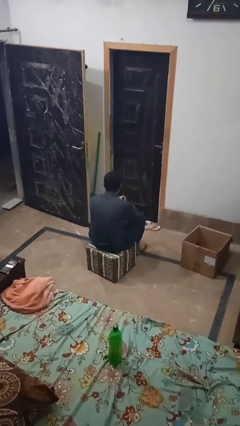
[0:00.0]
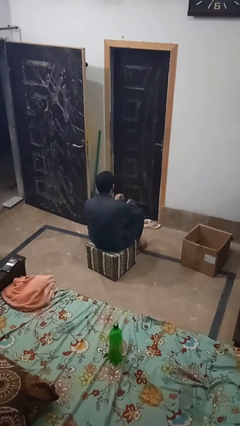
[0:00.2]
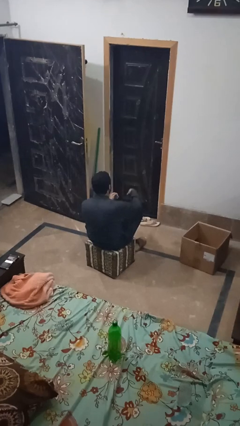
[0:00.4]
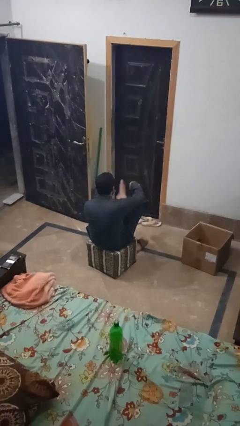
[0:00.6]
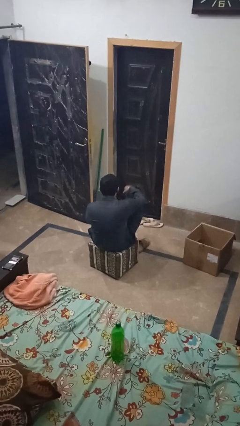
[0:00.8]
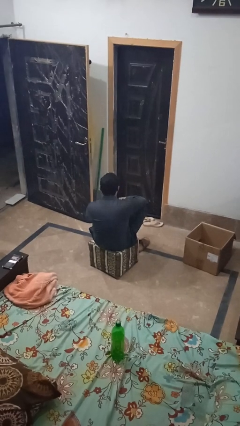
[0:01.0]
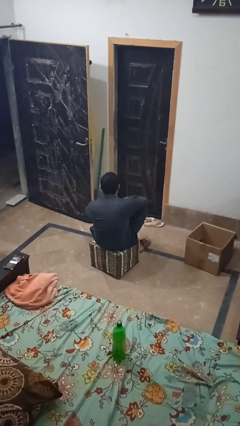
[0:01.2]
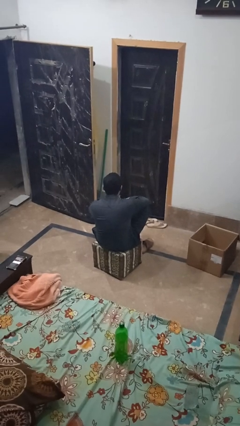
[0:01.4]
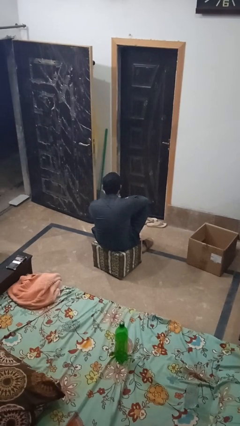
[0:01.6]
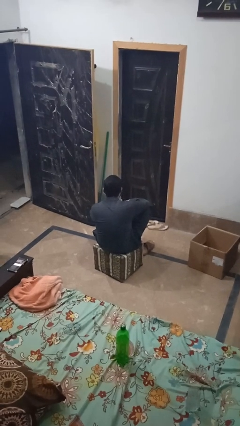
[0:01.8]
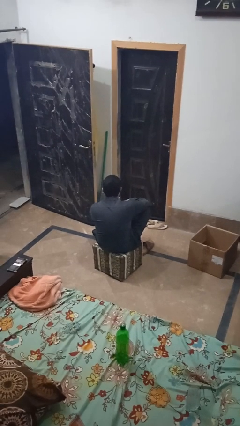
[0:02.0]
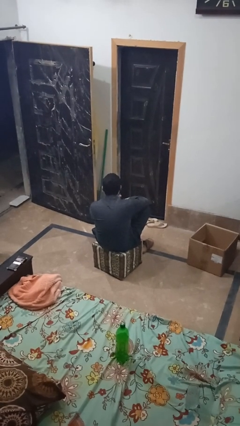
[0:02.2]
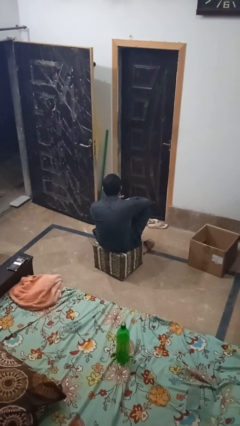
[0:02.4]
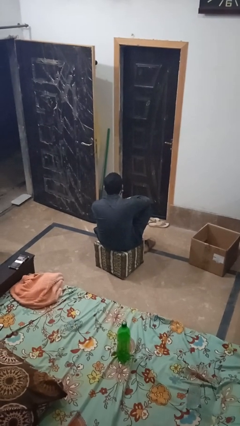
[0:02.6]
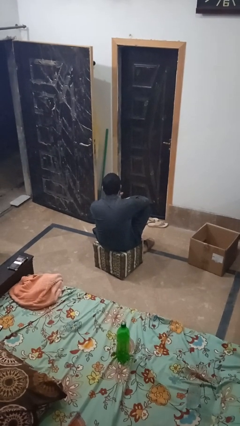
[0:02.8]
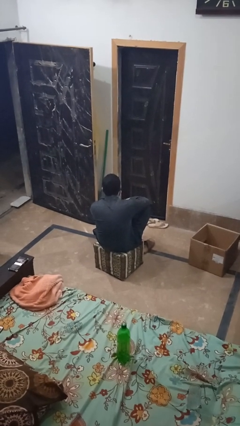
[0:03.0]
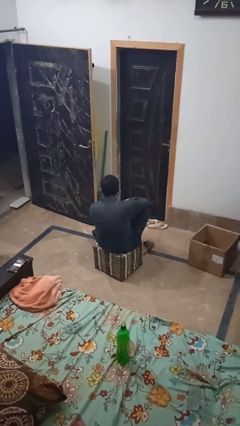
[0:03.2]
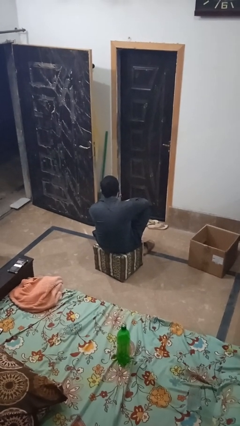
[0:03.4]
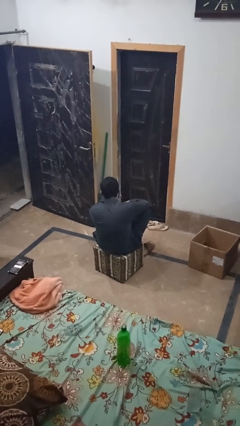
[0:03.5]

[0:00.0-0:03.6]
person rubs foot

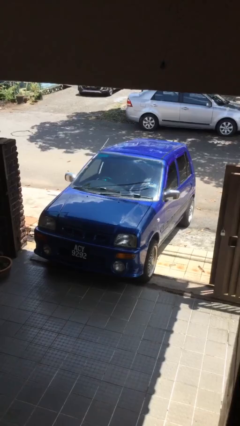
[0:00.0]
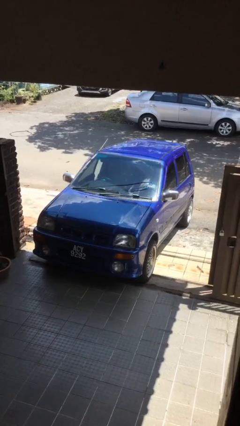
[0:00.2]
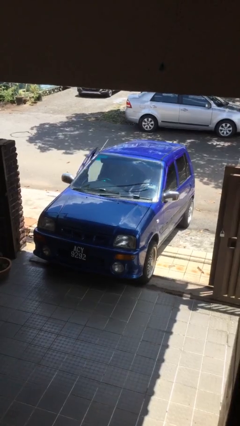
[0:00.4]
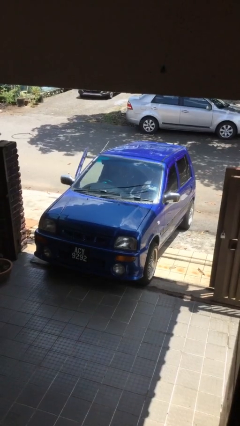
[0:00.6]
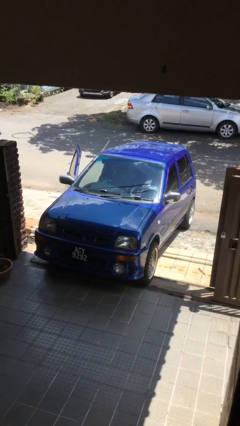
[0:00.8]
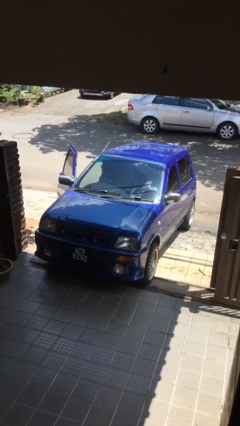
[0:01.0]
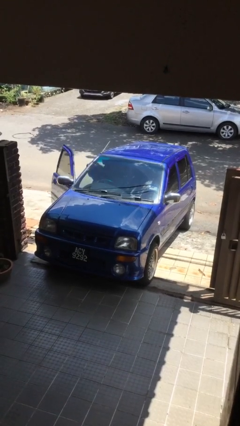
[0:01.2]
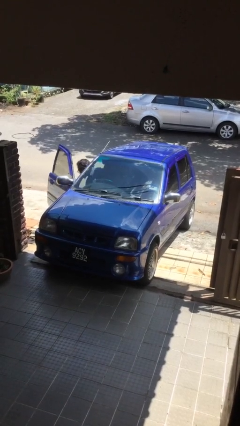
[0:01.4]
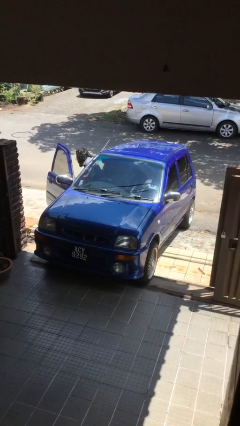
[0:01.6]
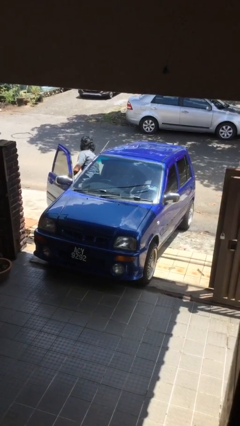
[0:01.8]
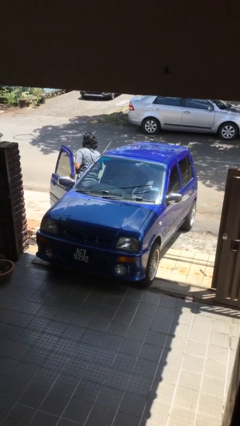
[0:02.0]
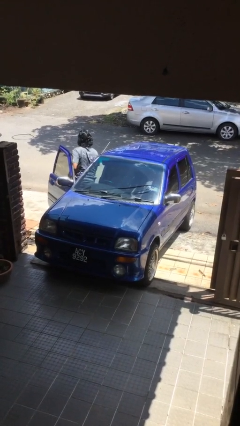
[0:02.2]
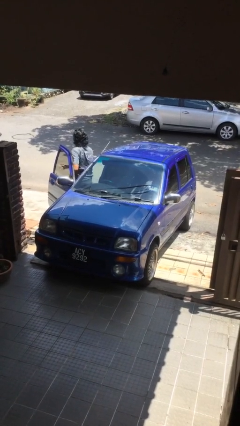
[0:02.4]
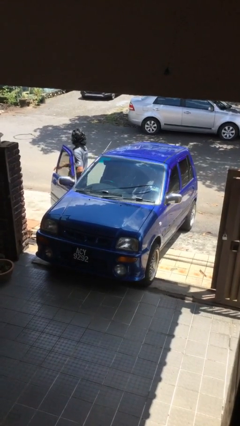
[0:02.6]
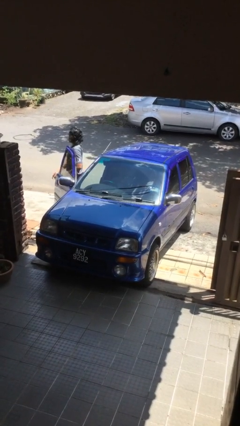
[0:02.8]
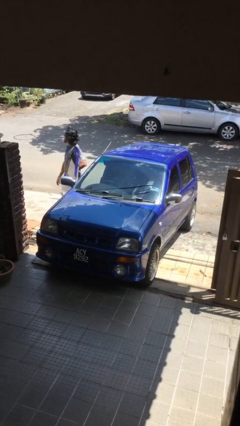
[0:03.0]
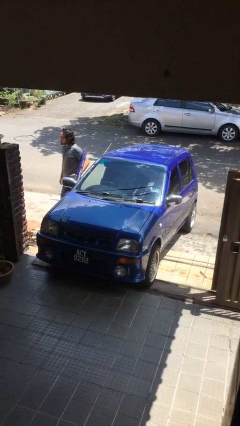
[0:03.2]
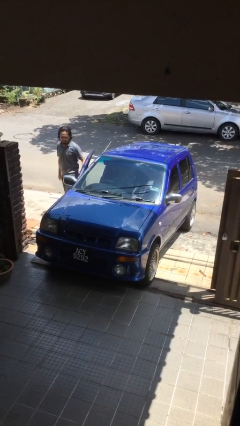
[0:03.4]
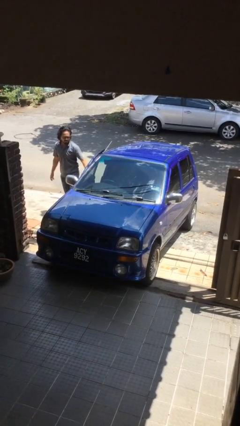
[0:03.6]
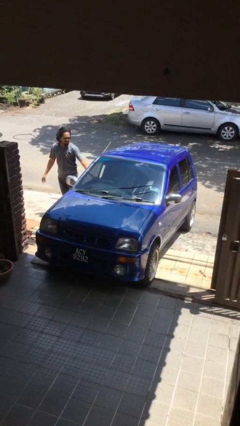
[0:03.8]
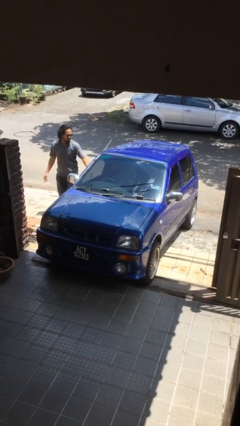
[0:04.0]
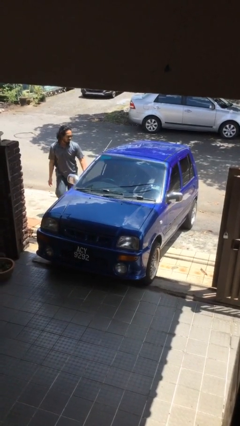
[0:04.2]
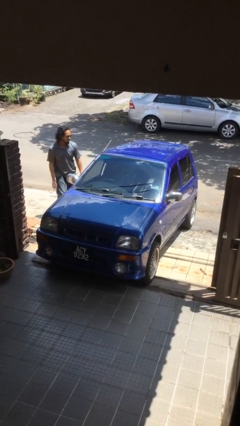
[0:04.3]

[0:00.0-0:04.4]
car drops off person

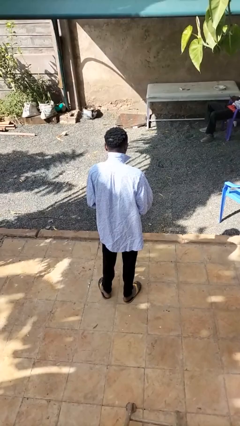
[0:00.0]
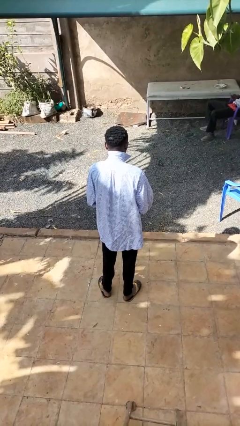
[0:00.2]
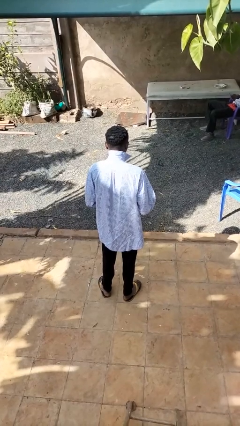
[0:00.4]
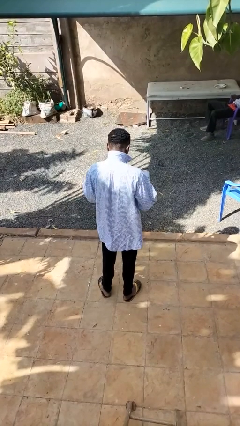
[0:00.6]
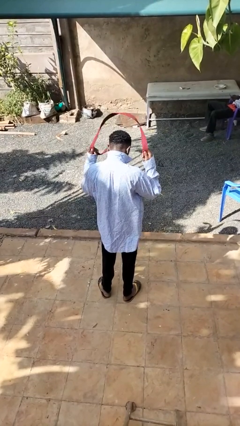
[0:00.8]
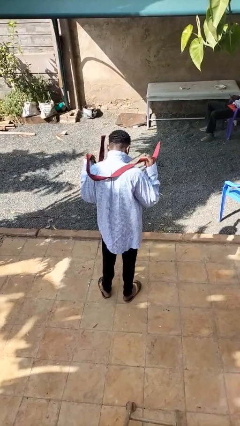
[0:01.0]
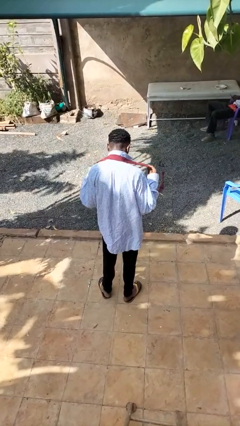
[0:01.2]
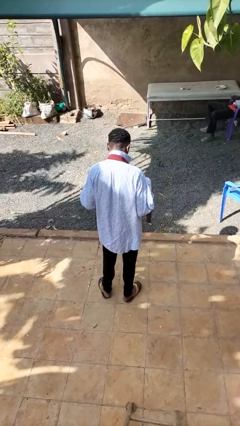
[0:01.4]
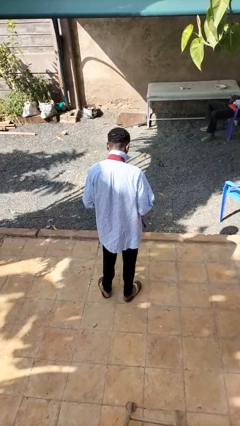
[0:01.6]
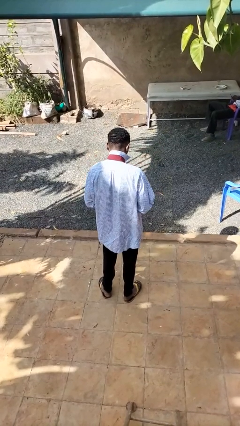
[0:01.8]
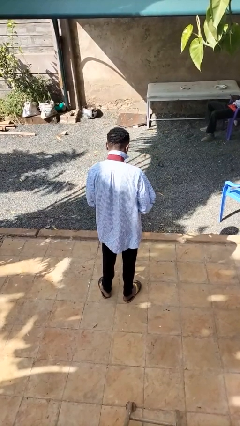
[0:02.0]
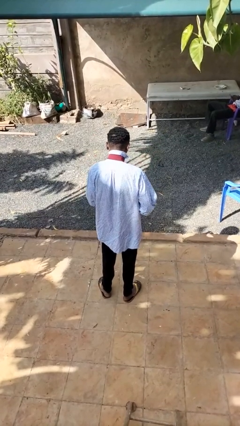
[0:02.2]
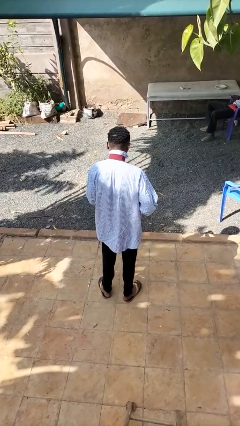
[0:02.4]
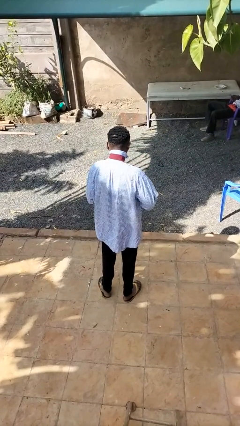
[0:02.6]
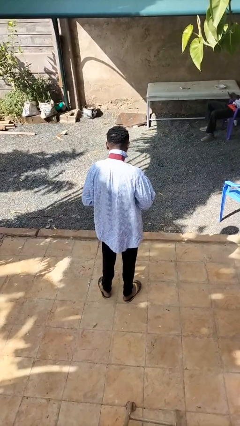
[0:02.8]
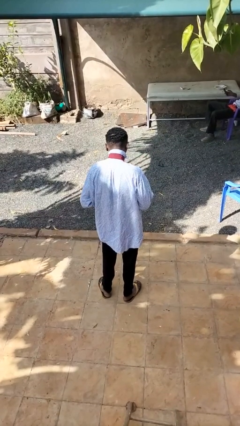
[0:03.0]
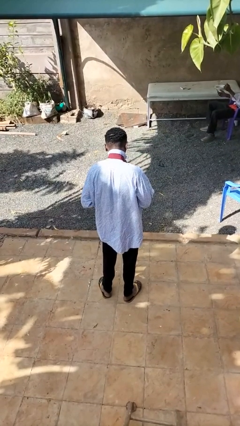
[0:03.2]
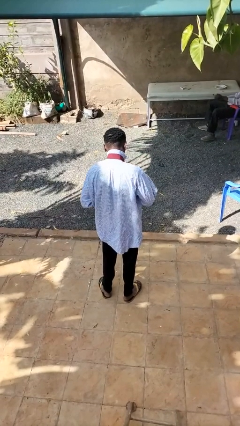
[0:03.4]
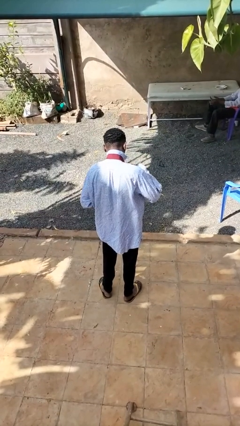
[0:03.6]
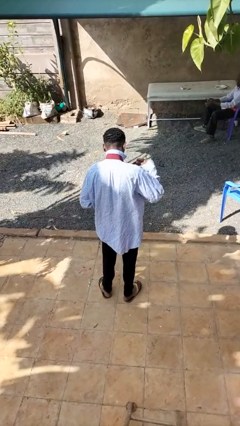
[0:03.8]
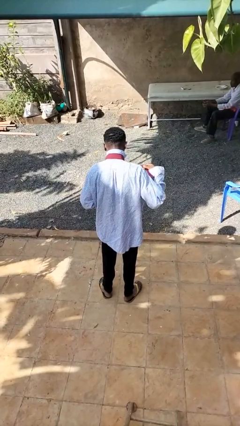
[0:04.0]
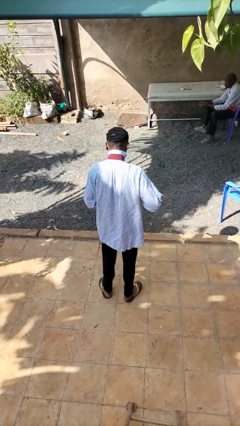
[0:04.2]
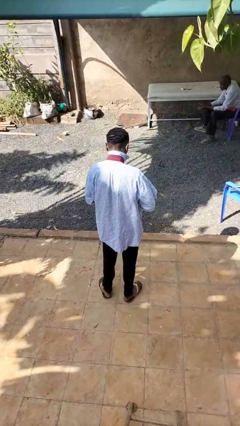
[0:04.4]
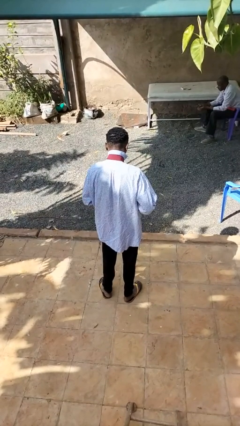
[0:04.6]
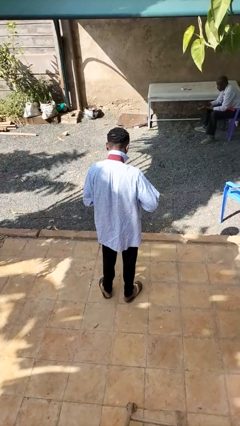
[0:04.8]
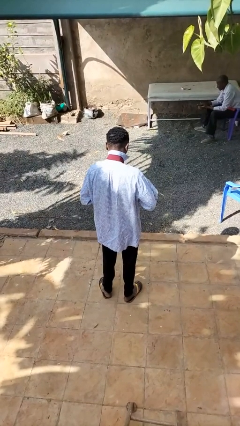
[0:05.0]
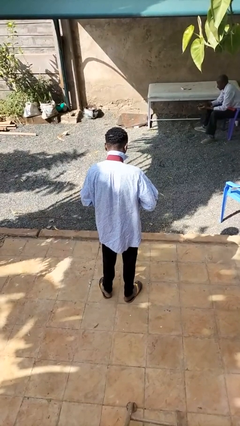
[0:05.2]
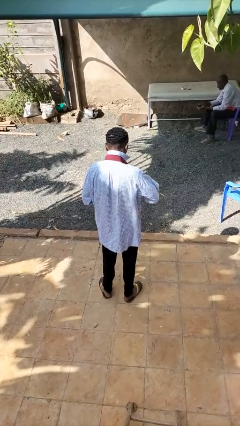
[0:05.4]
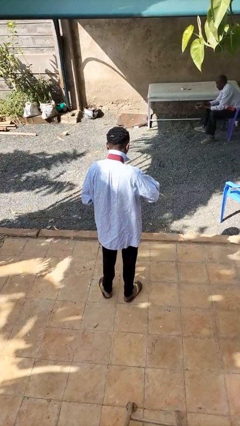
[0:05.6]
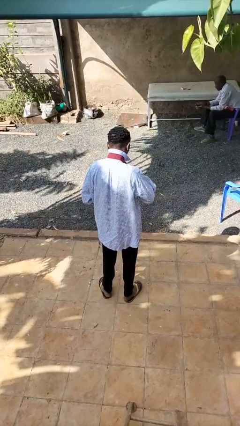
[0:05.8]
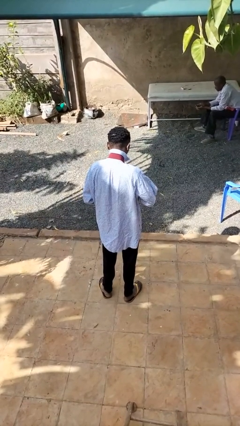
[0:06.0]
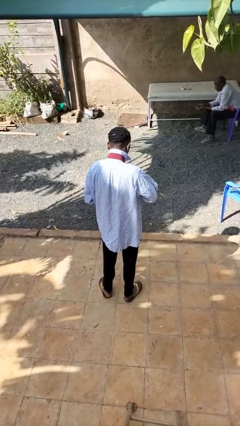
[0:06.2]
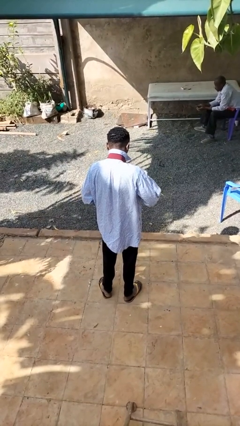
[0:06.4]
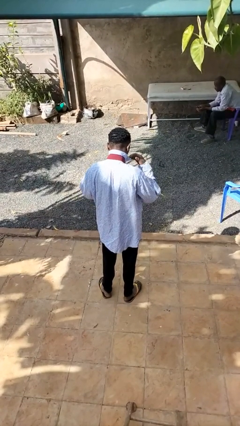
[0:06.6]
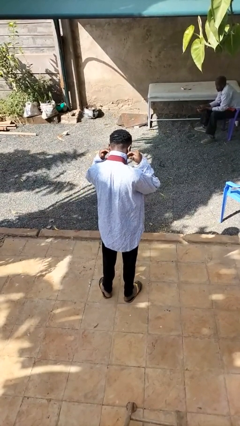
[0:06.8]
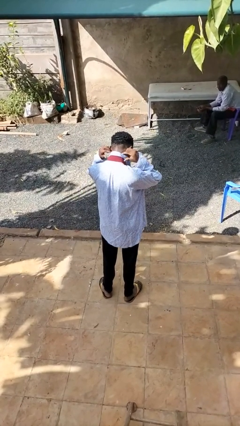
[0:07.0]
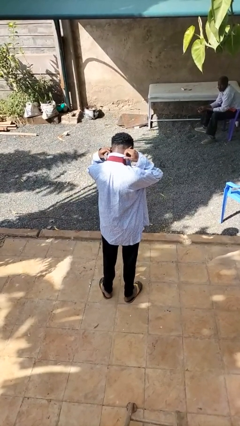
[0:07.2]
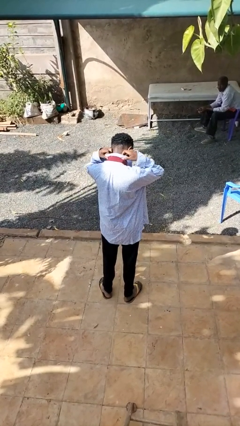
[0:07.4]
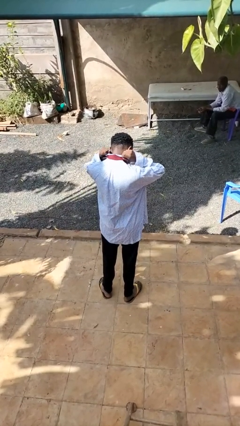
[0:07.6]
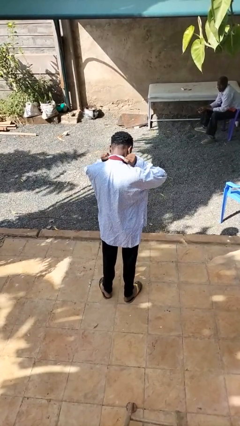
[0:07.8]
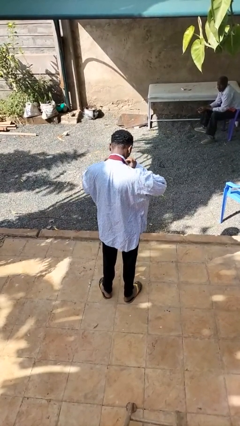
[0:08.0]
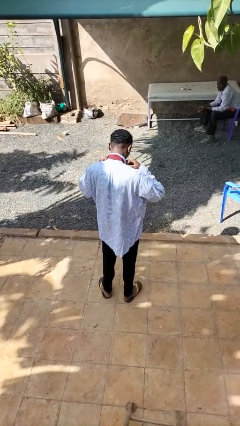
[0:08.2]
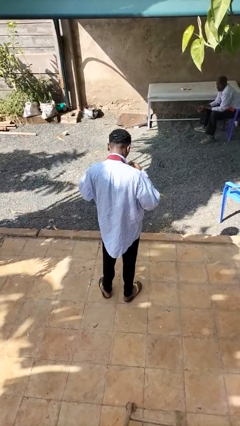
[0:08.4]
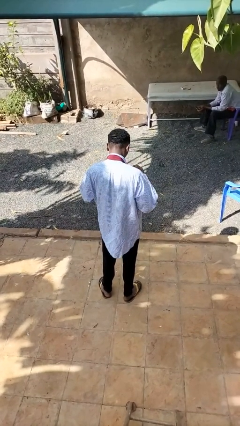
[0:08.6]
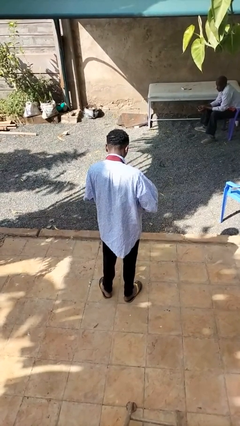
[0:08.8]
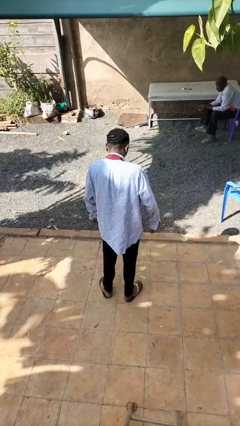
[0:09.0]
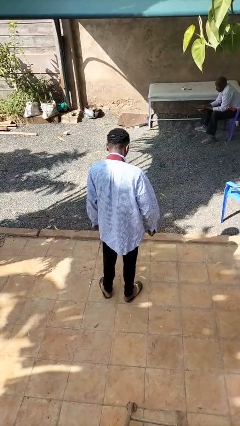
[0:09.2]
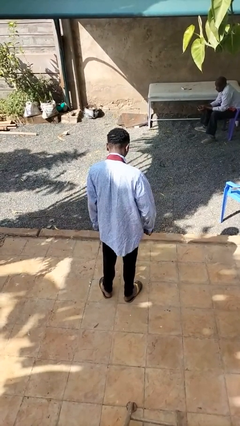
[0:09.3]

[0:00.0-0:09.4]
person puts on necktie

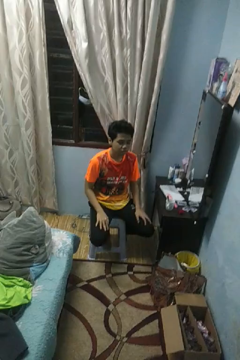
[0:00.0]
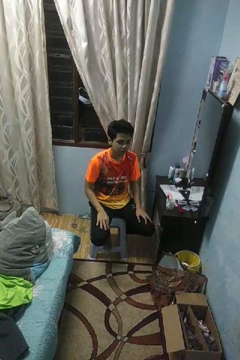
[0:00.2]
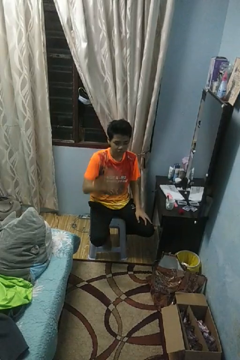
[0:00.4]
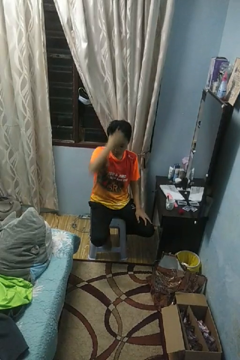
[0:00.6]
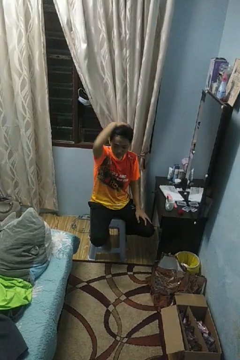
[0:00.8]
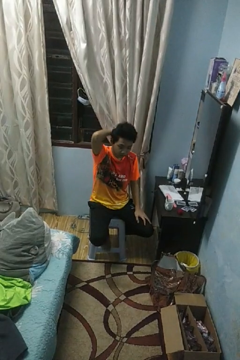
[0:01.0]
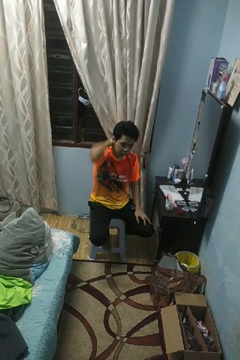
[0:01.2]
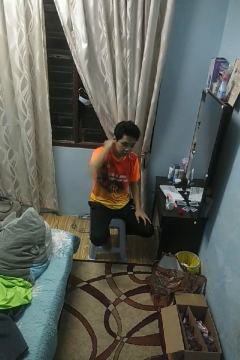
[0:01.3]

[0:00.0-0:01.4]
person strokes hair
